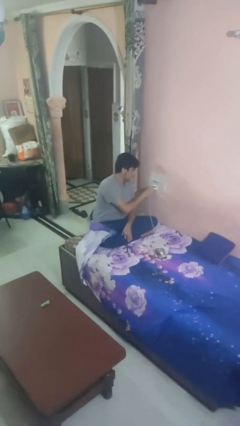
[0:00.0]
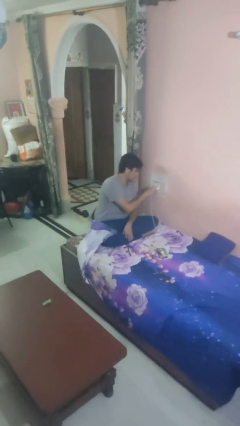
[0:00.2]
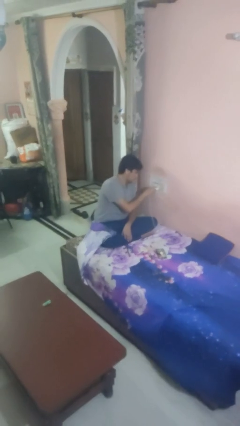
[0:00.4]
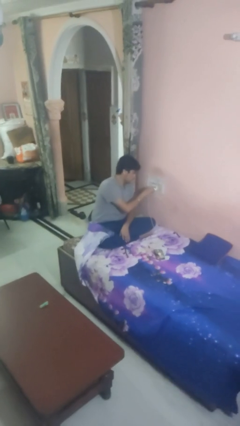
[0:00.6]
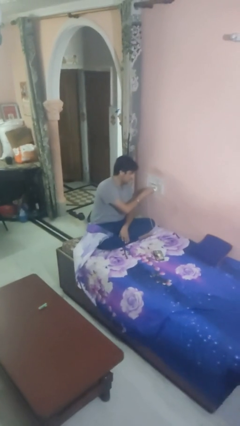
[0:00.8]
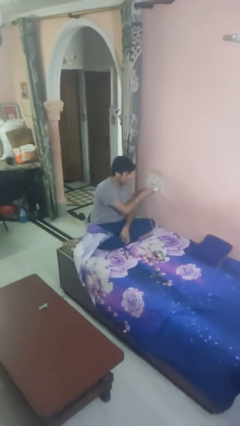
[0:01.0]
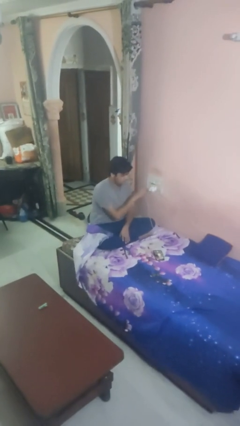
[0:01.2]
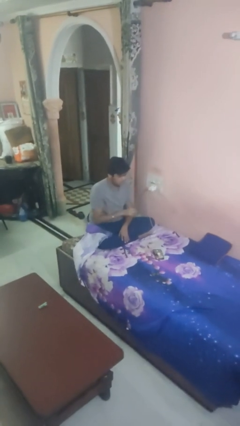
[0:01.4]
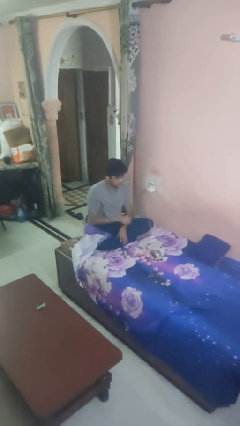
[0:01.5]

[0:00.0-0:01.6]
person plugs into electrical socket

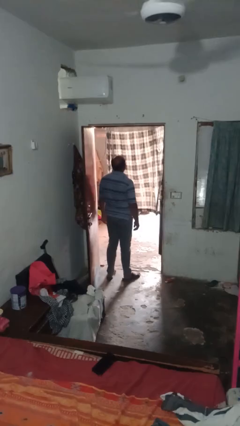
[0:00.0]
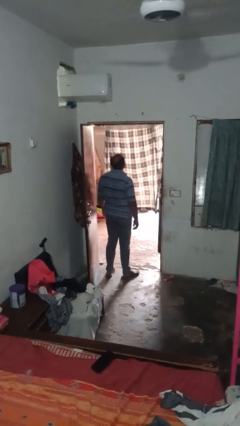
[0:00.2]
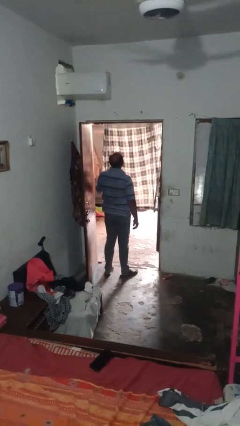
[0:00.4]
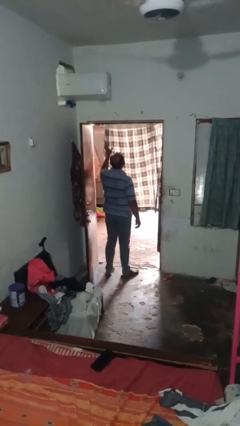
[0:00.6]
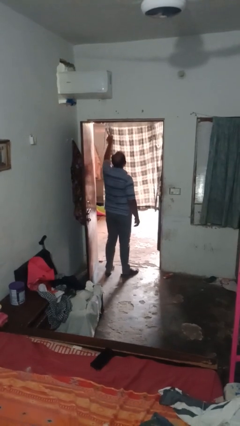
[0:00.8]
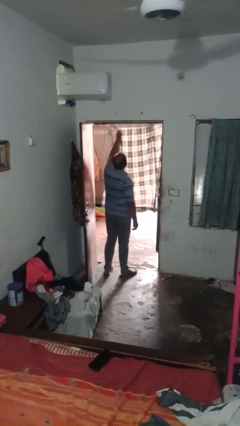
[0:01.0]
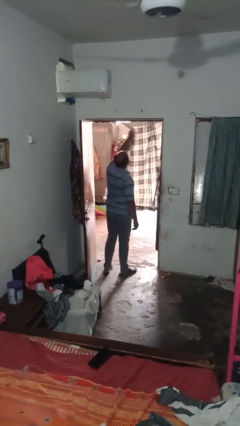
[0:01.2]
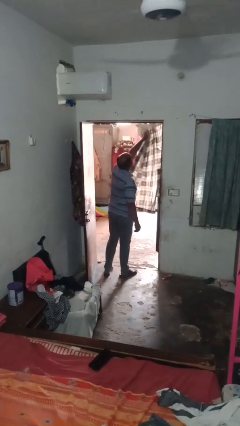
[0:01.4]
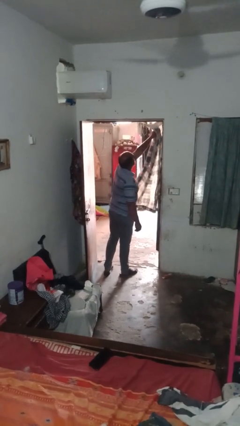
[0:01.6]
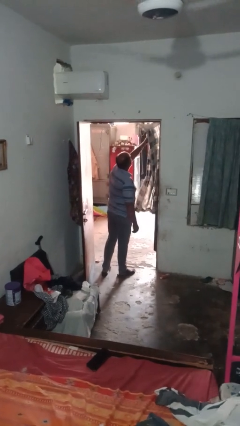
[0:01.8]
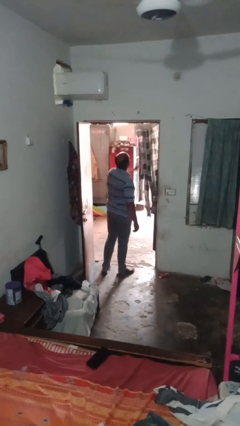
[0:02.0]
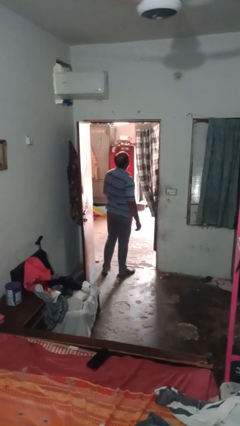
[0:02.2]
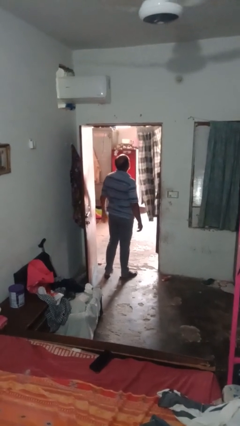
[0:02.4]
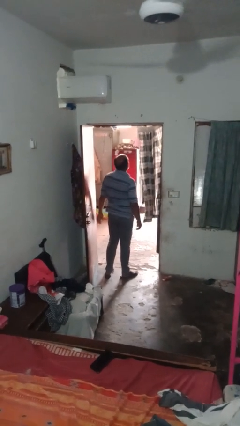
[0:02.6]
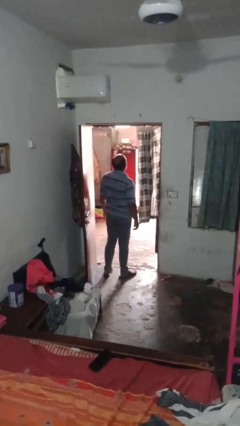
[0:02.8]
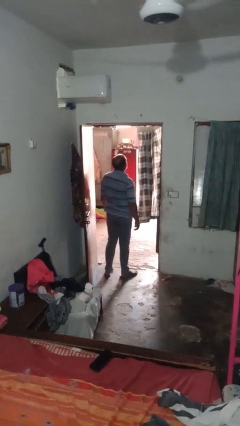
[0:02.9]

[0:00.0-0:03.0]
person opens curtains

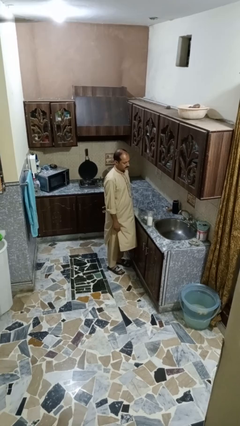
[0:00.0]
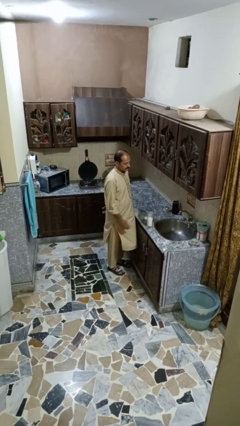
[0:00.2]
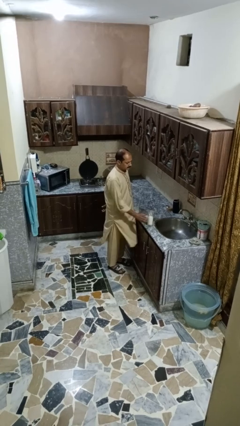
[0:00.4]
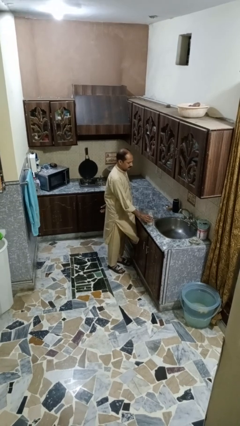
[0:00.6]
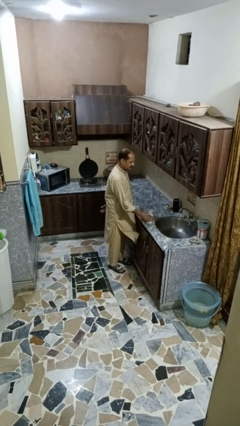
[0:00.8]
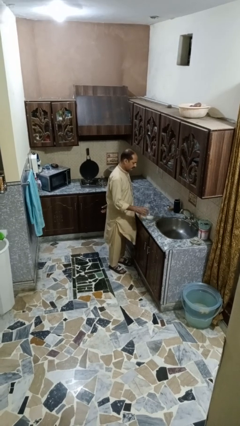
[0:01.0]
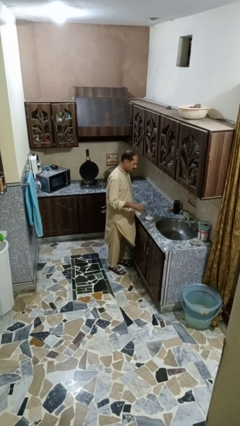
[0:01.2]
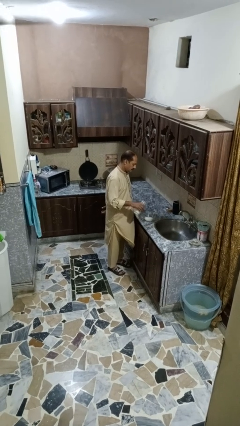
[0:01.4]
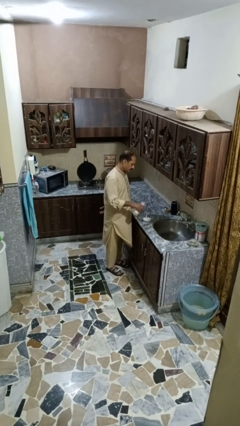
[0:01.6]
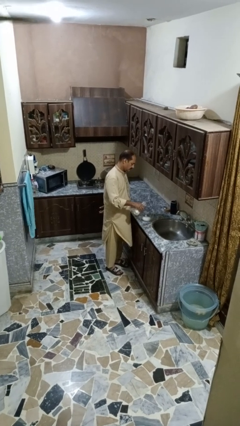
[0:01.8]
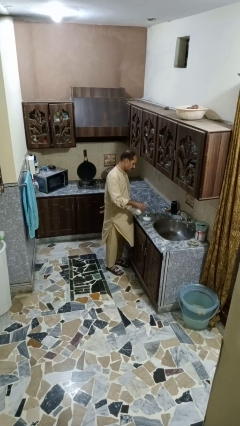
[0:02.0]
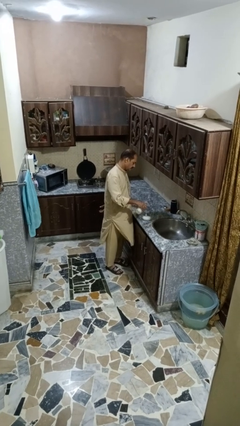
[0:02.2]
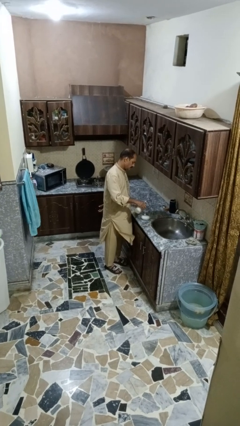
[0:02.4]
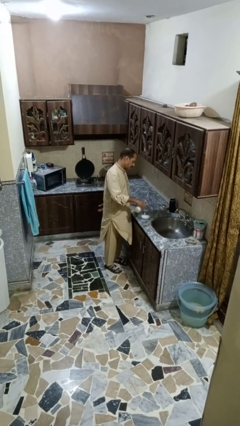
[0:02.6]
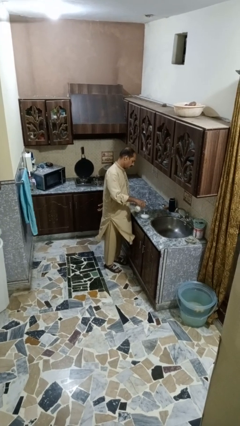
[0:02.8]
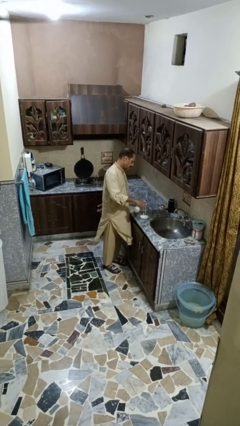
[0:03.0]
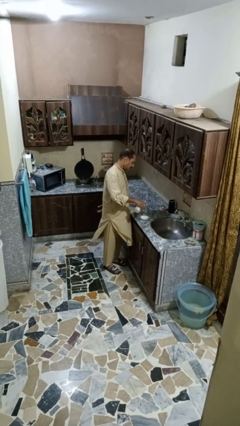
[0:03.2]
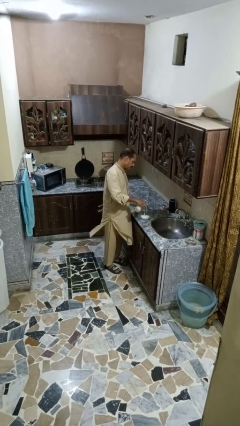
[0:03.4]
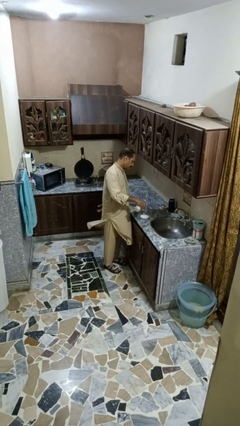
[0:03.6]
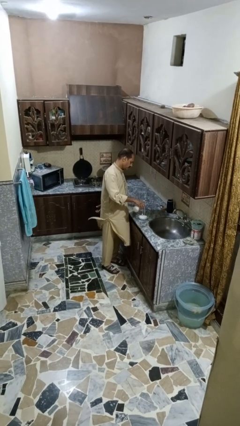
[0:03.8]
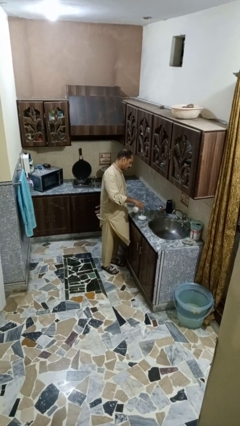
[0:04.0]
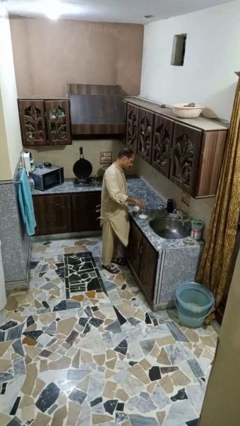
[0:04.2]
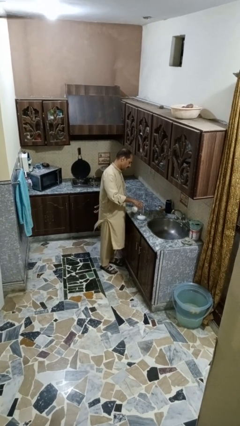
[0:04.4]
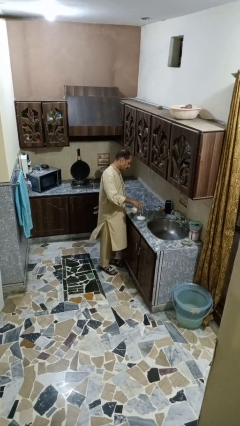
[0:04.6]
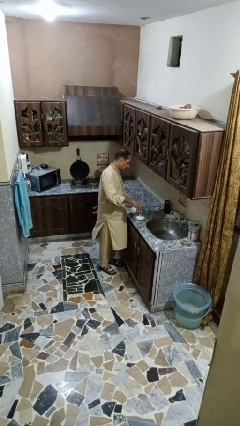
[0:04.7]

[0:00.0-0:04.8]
person pours into bowl

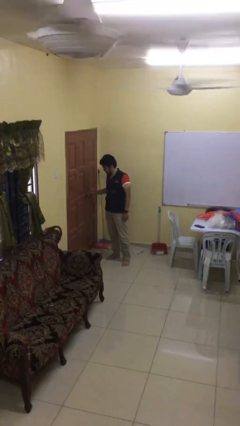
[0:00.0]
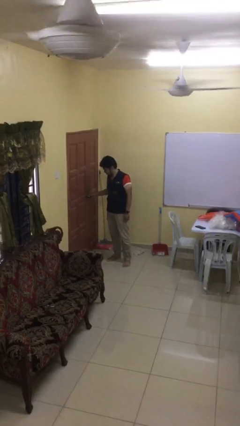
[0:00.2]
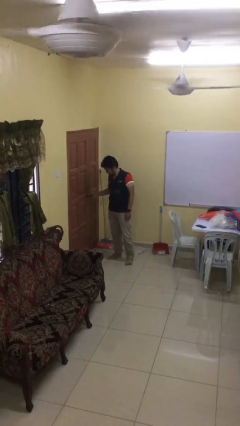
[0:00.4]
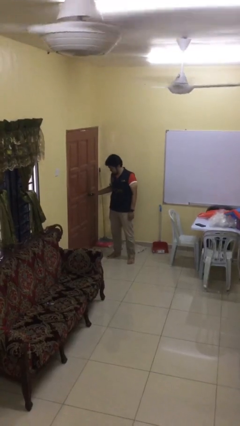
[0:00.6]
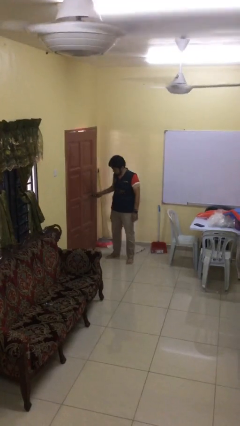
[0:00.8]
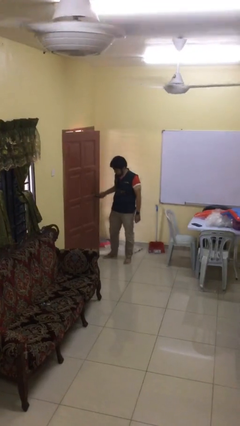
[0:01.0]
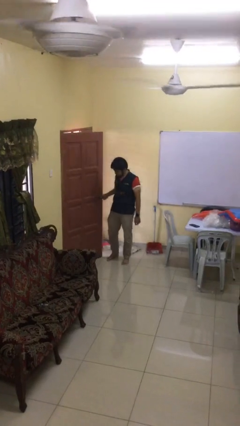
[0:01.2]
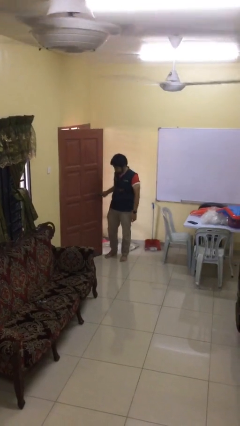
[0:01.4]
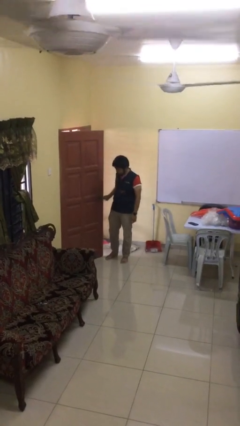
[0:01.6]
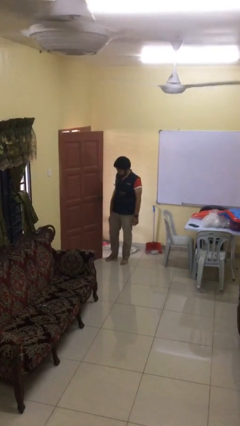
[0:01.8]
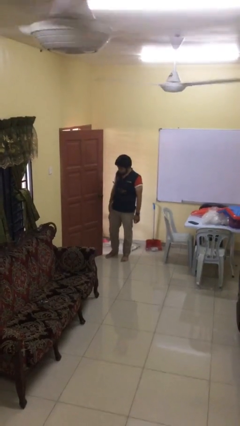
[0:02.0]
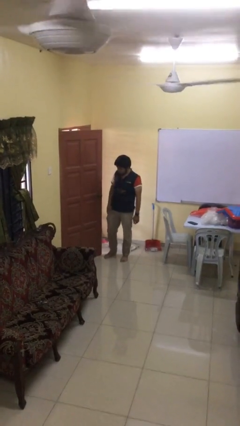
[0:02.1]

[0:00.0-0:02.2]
person opens facility door

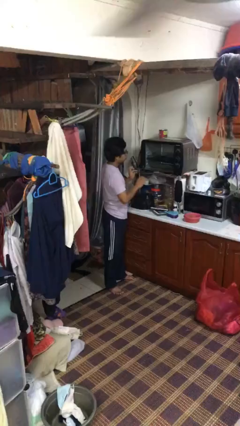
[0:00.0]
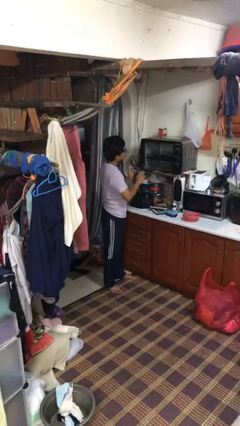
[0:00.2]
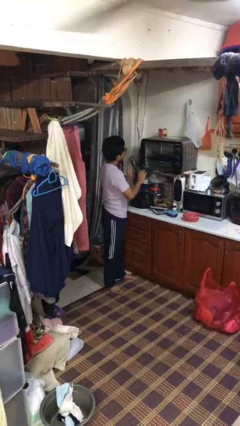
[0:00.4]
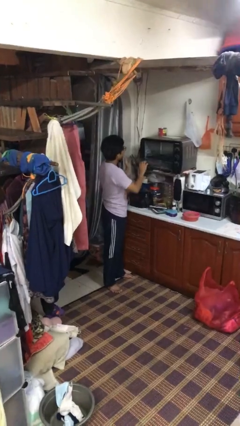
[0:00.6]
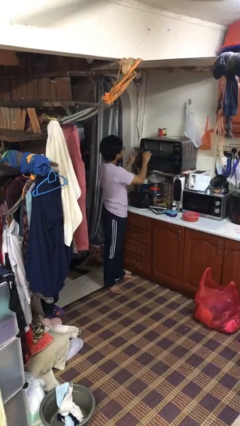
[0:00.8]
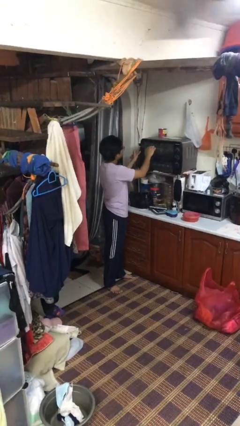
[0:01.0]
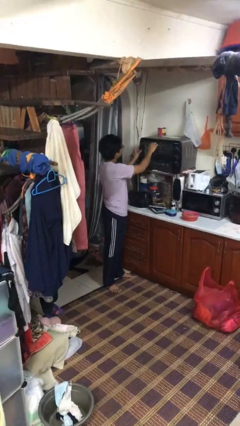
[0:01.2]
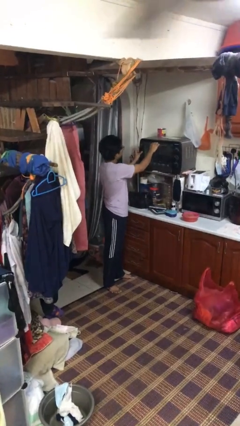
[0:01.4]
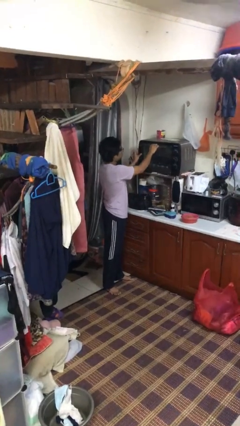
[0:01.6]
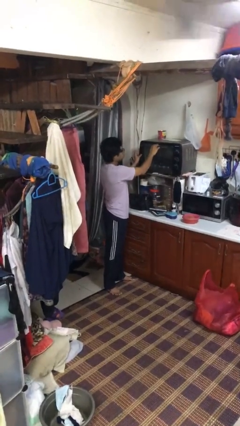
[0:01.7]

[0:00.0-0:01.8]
person closes oven door

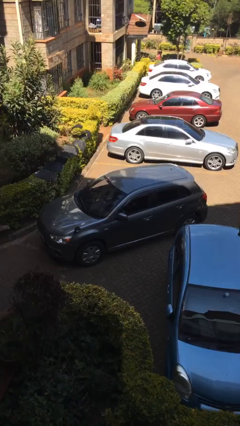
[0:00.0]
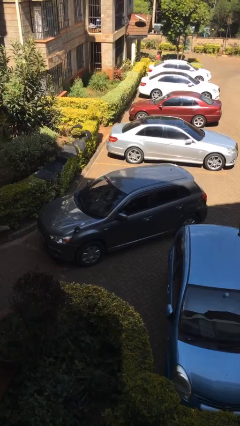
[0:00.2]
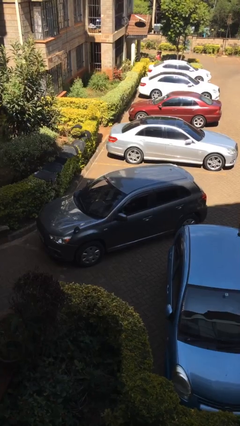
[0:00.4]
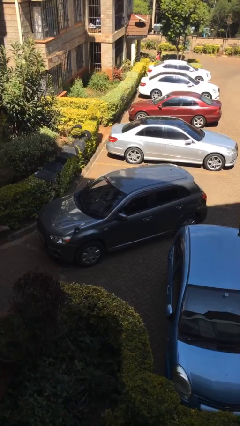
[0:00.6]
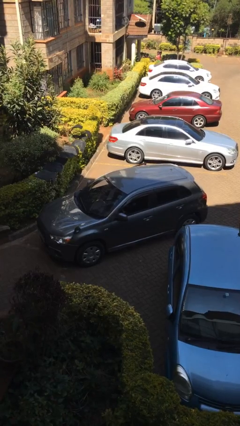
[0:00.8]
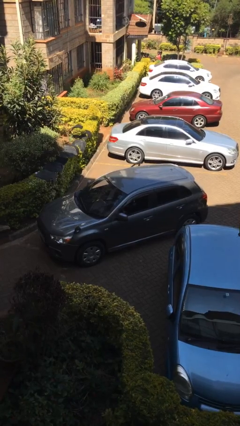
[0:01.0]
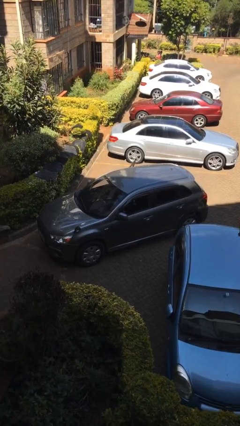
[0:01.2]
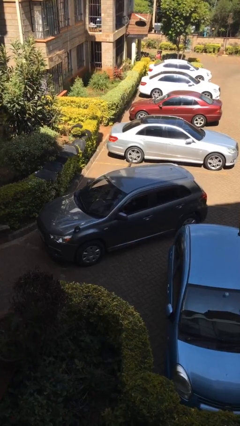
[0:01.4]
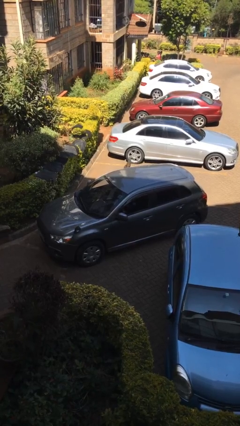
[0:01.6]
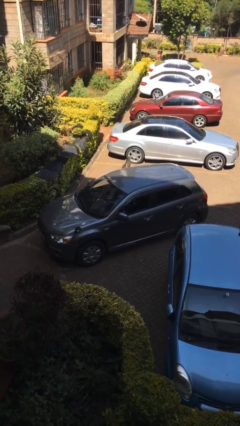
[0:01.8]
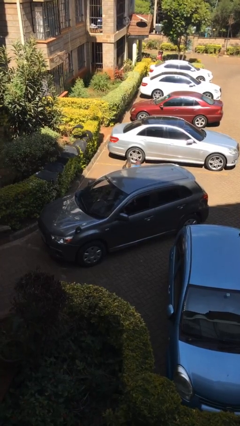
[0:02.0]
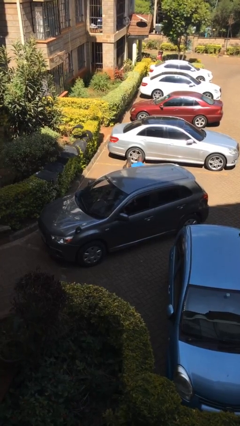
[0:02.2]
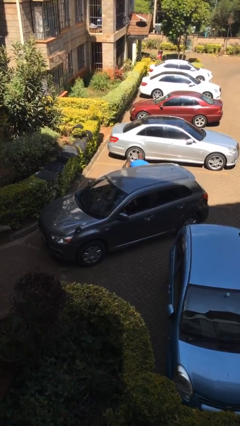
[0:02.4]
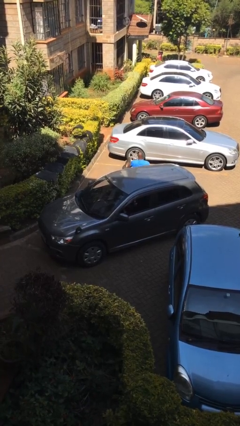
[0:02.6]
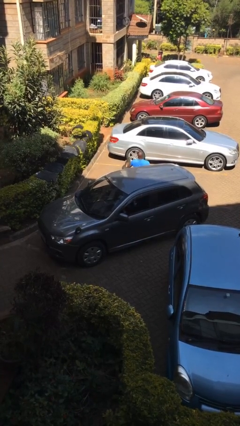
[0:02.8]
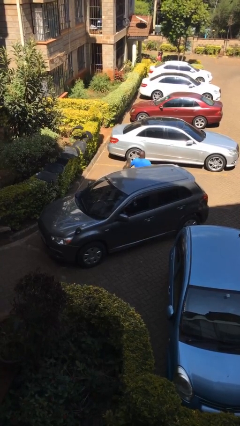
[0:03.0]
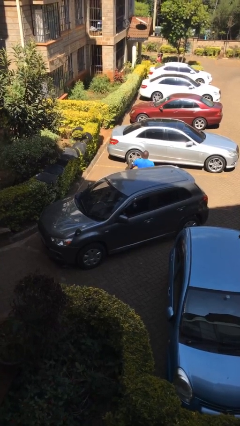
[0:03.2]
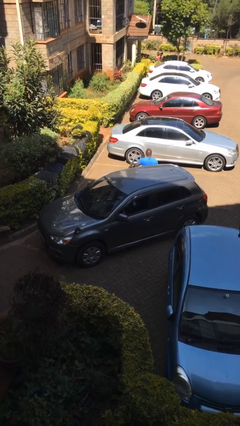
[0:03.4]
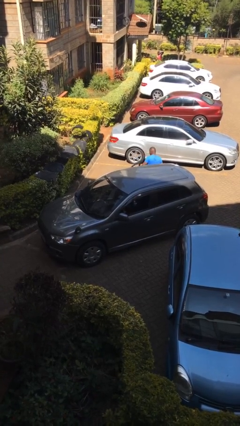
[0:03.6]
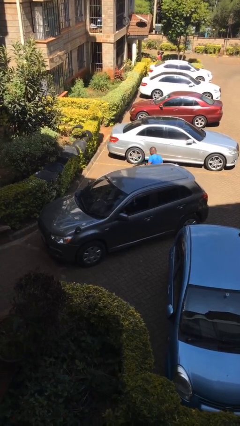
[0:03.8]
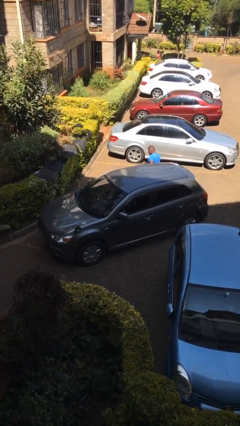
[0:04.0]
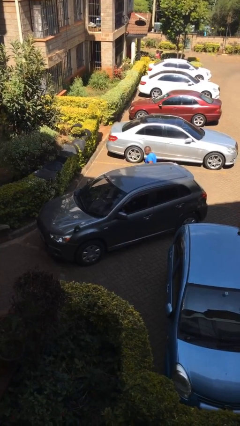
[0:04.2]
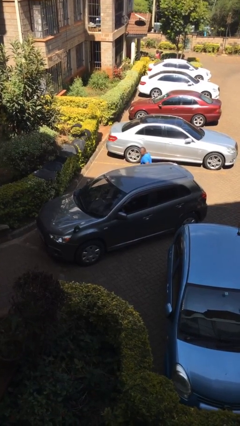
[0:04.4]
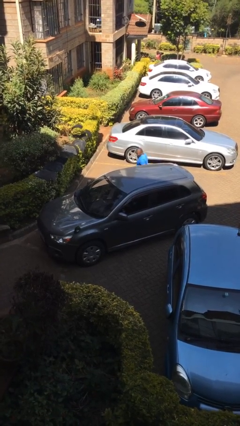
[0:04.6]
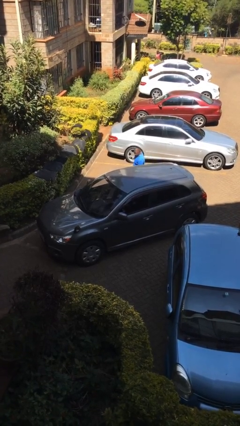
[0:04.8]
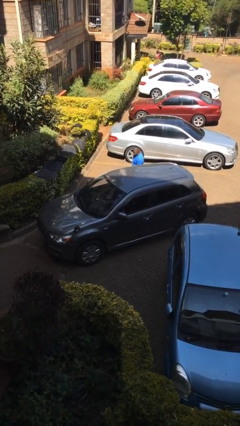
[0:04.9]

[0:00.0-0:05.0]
car drops off person
